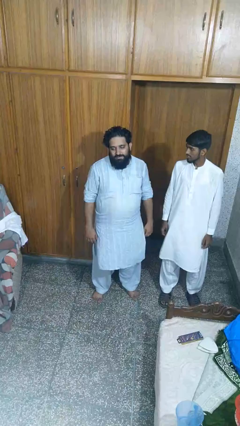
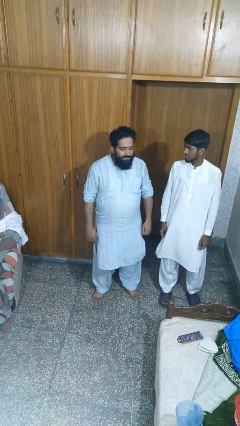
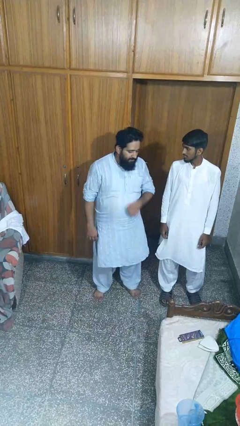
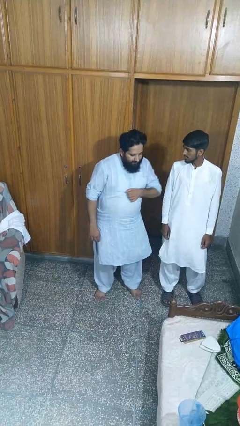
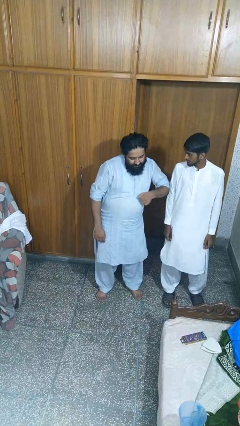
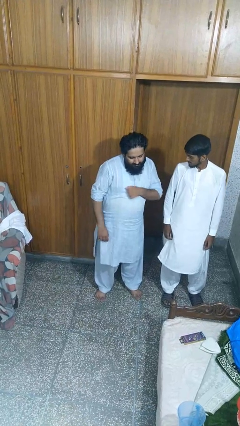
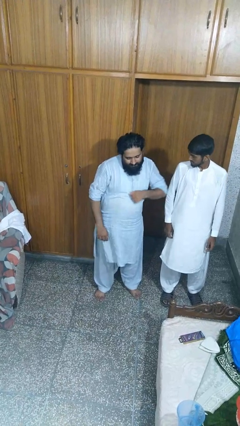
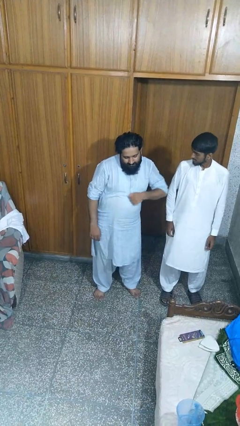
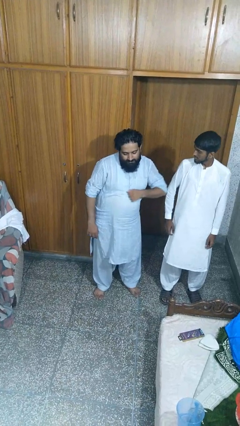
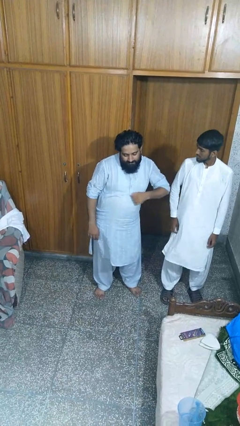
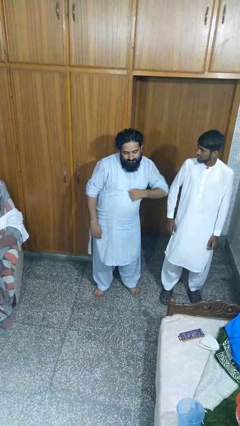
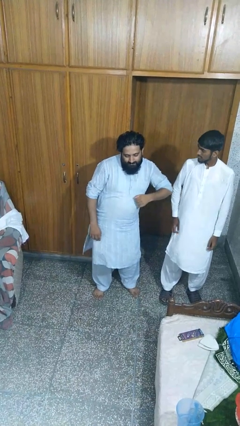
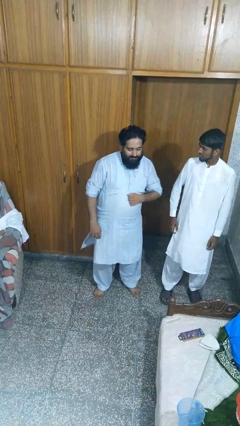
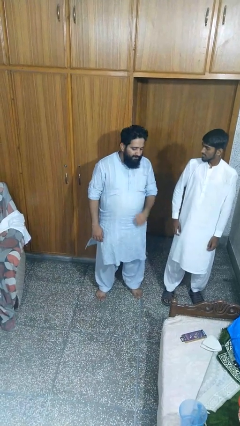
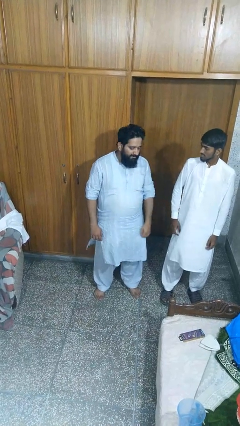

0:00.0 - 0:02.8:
person nudges person with elbow

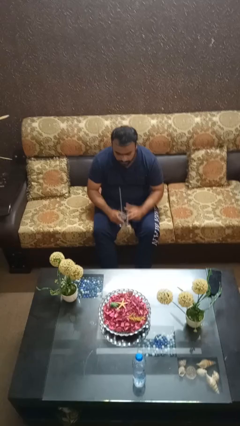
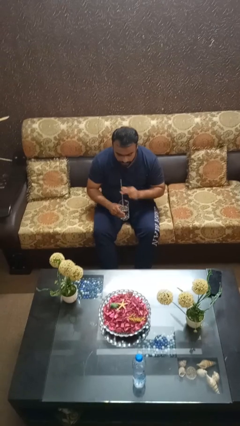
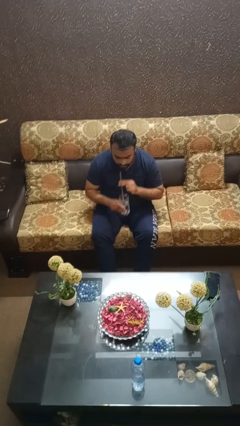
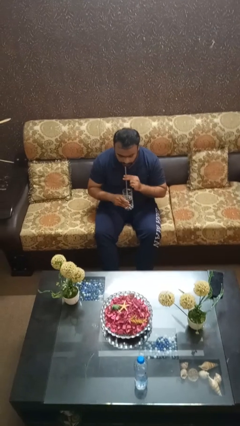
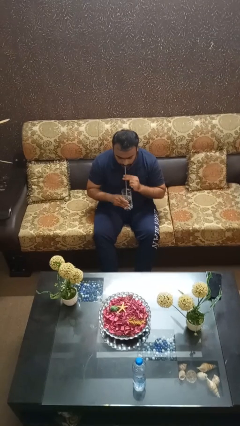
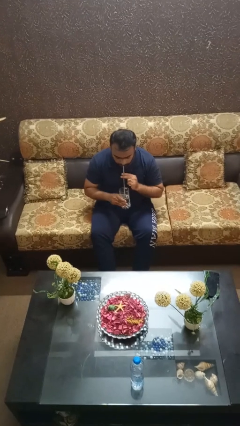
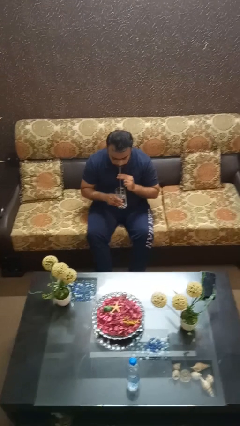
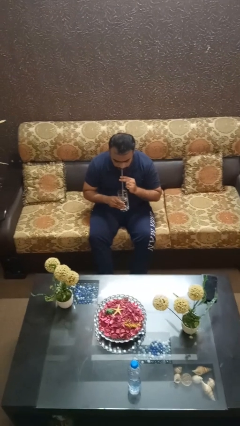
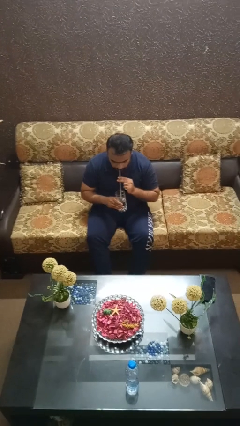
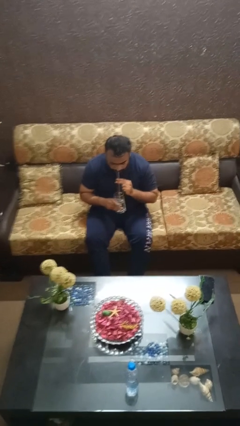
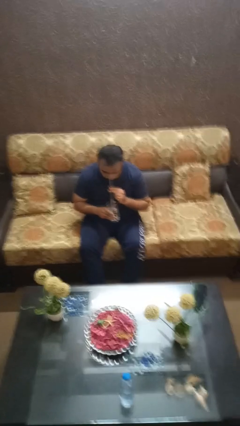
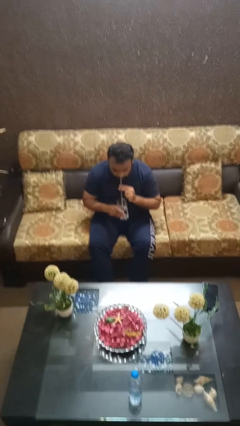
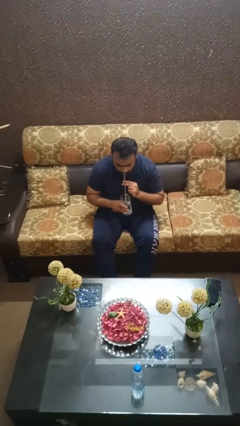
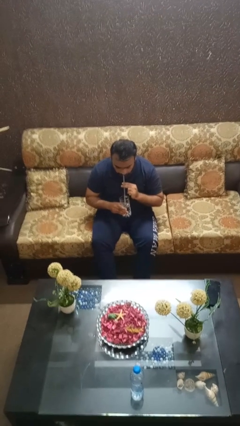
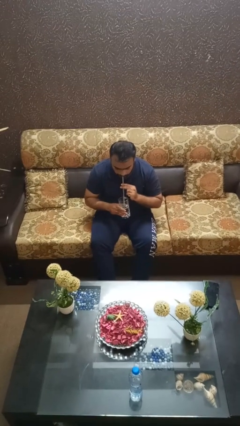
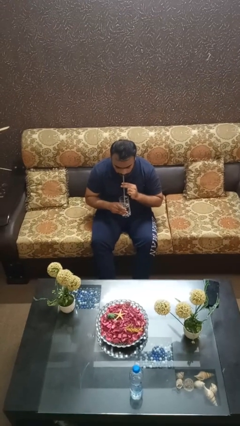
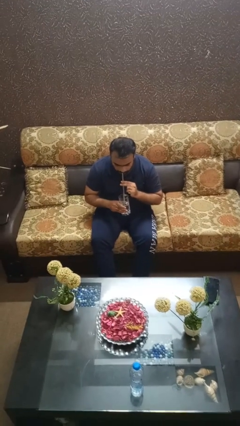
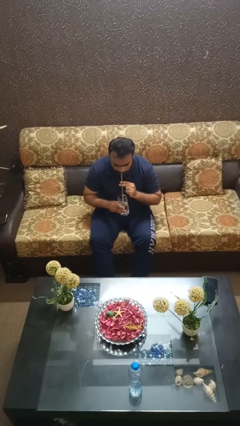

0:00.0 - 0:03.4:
person drinks from straw

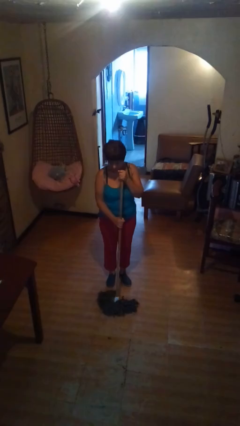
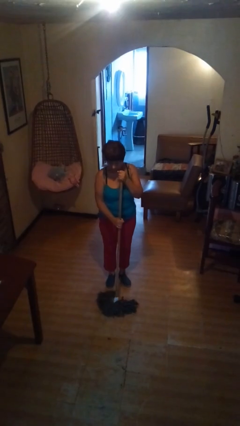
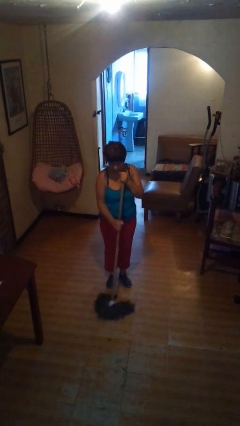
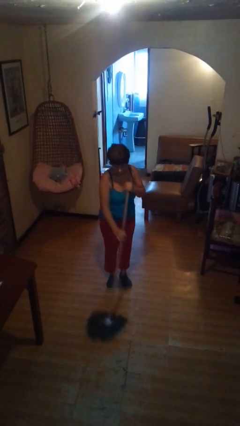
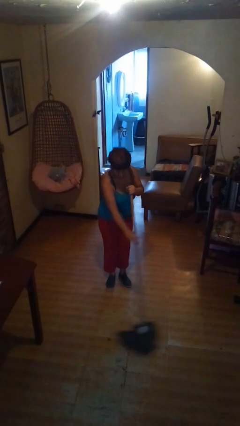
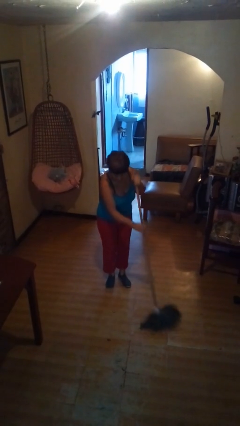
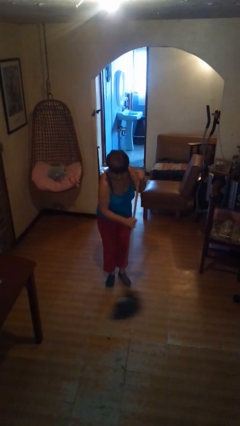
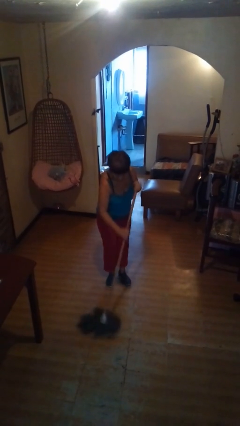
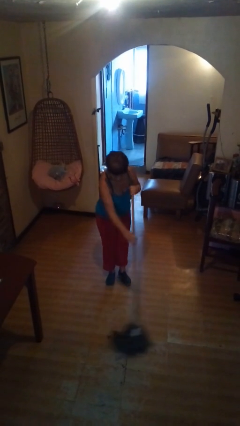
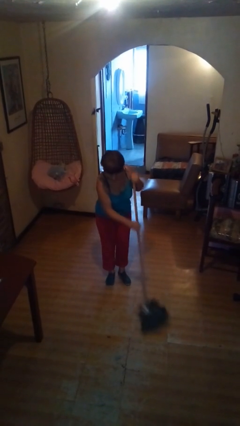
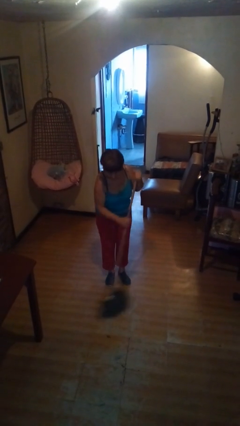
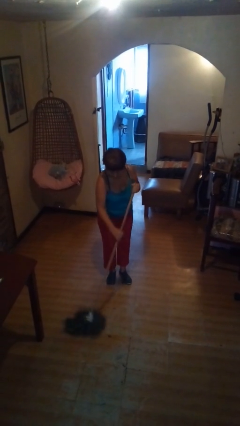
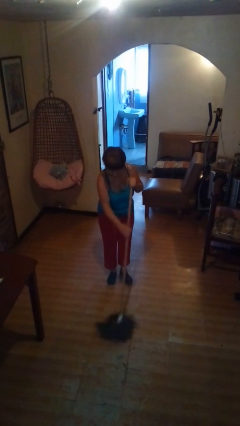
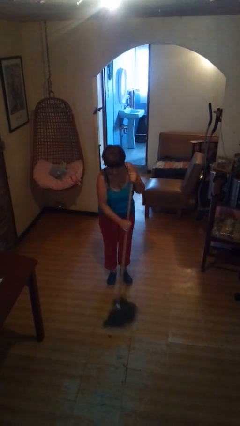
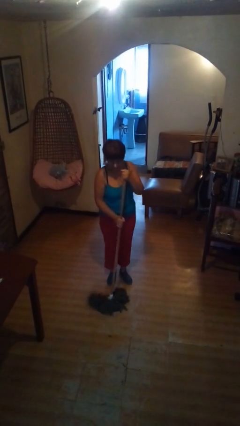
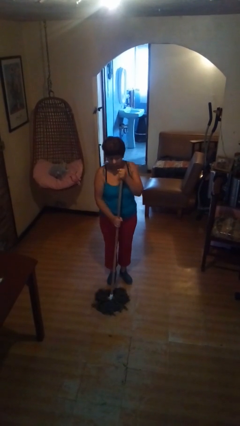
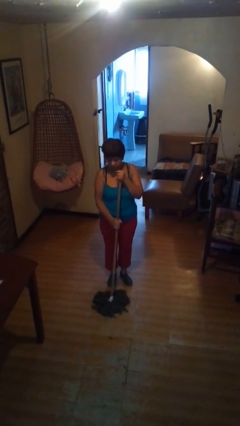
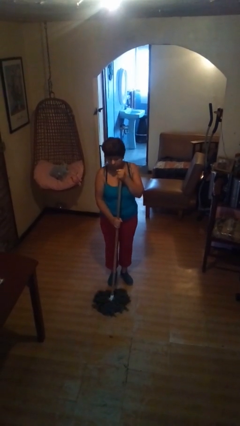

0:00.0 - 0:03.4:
person mops

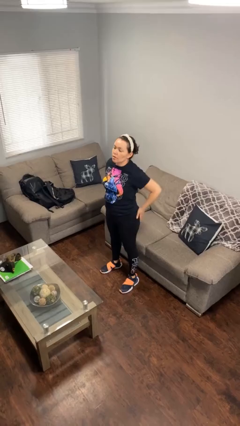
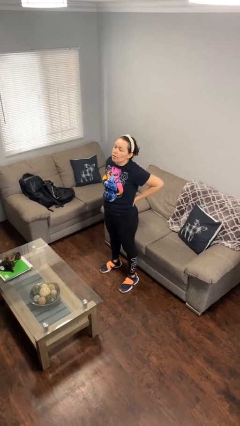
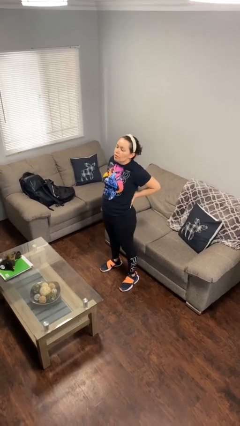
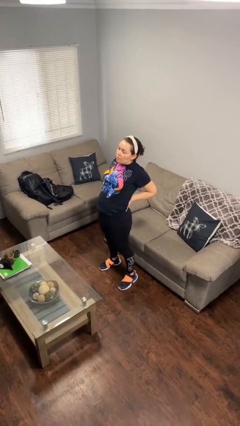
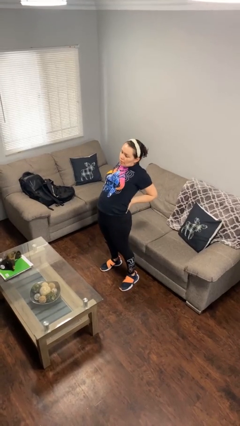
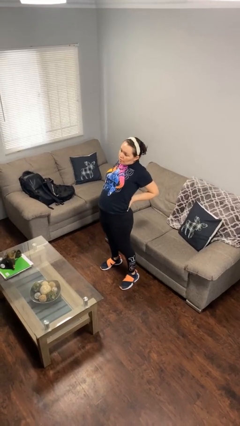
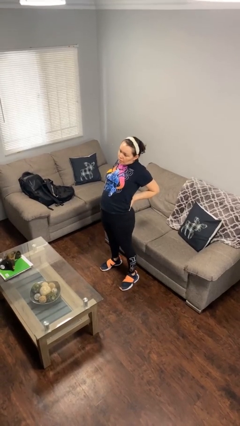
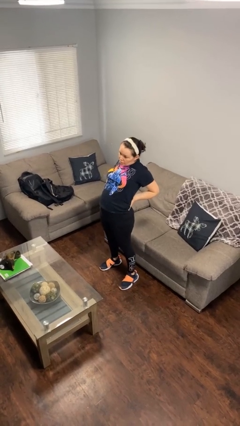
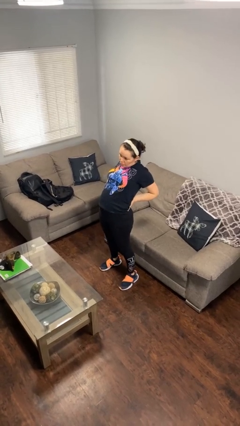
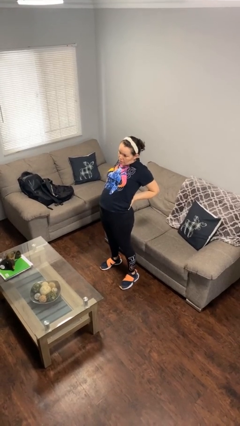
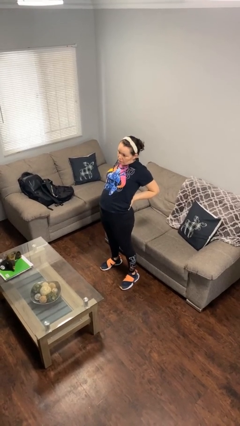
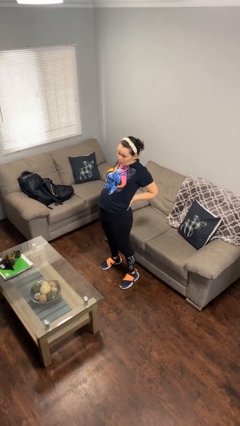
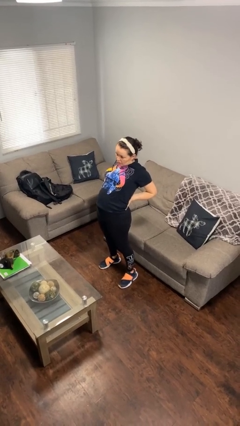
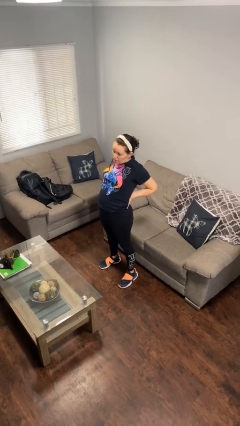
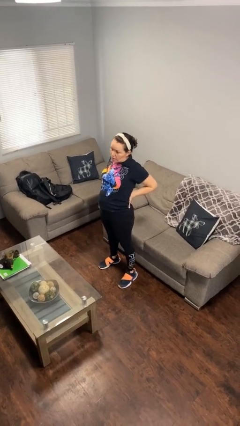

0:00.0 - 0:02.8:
person stretches back

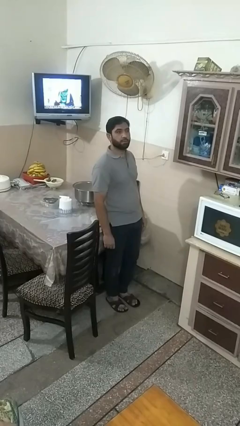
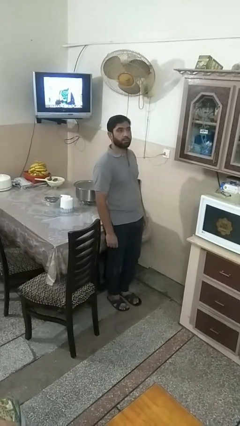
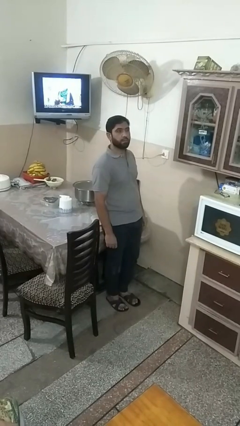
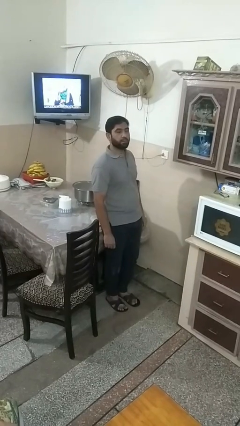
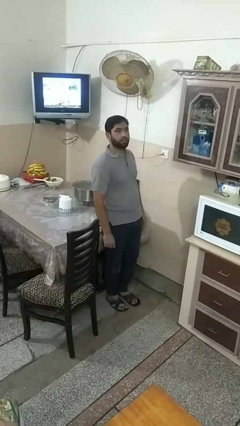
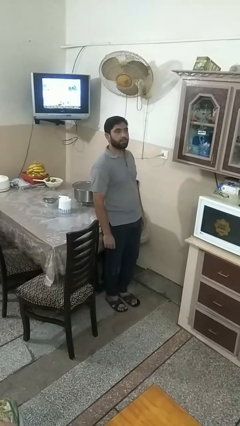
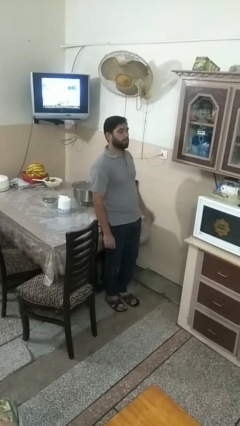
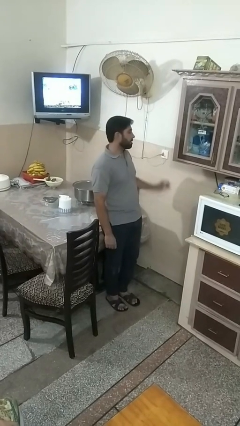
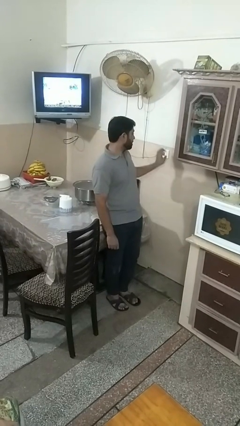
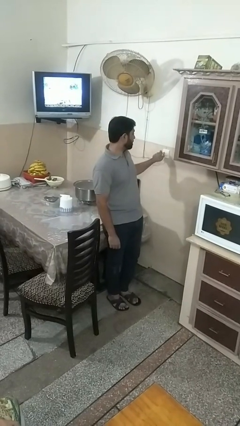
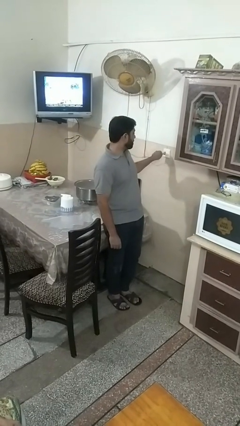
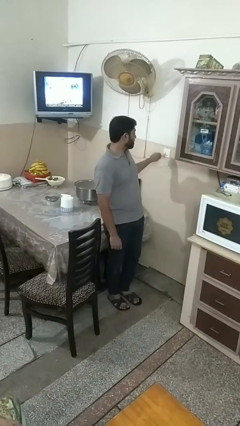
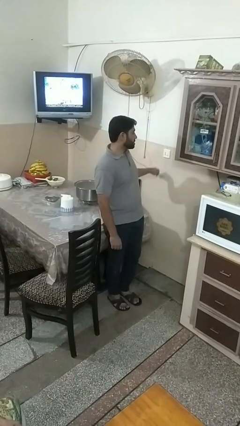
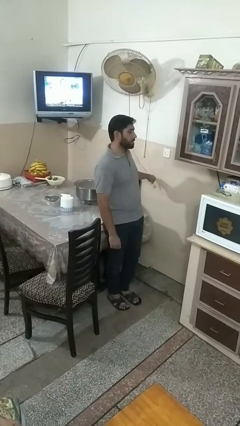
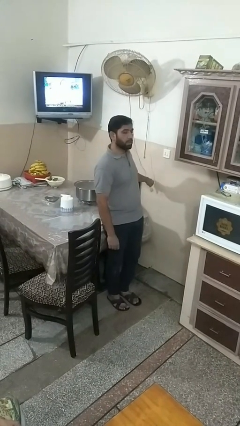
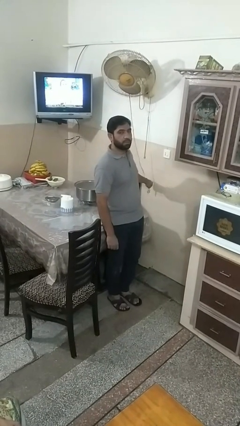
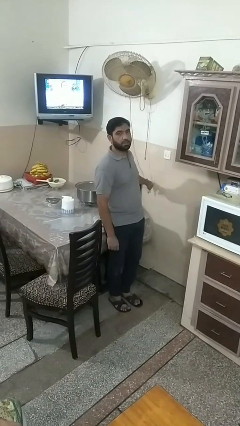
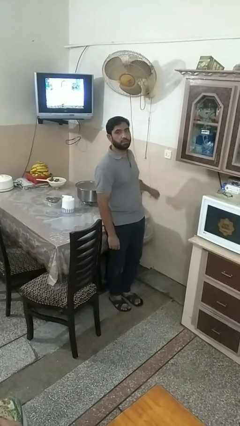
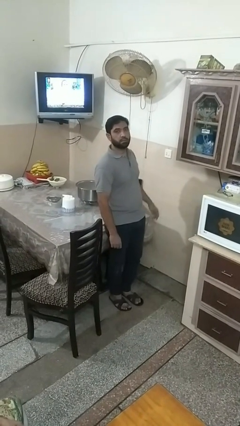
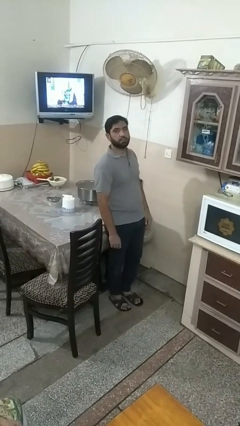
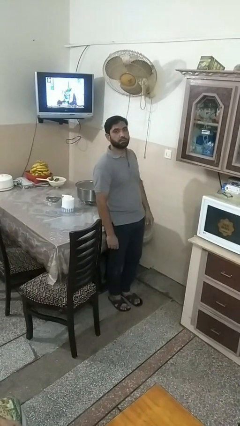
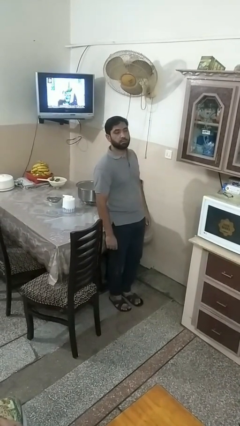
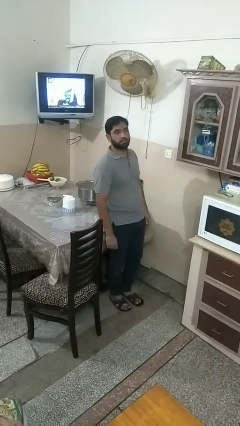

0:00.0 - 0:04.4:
person unplugs from electrical socket

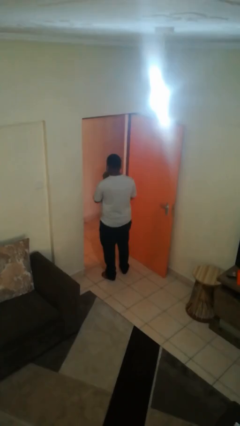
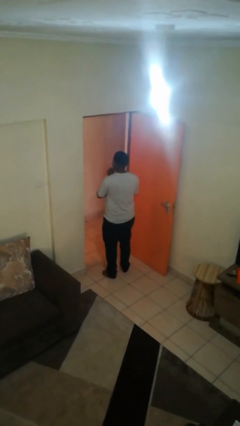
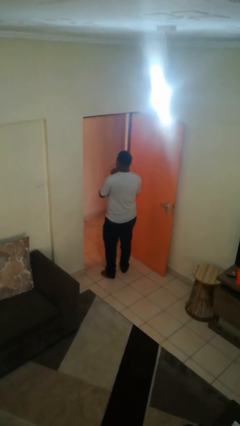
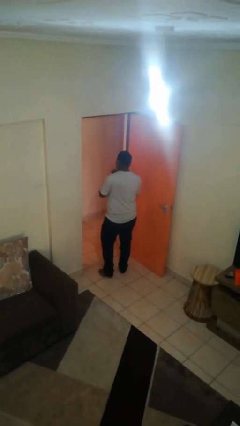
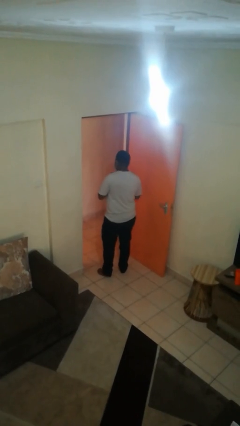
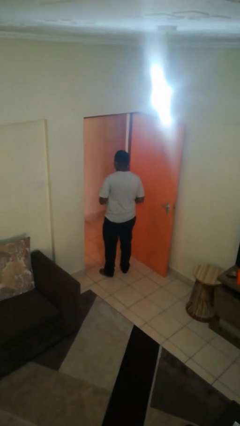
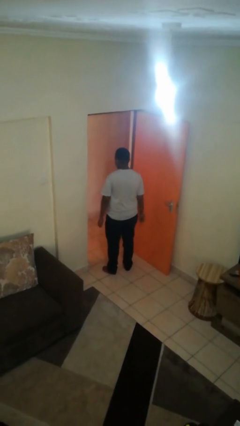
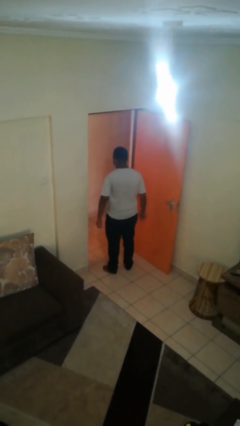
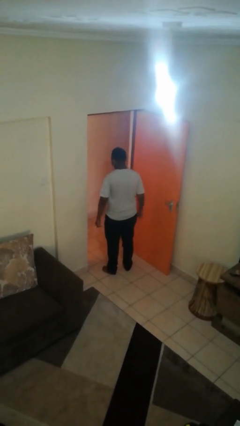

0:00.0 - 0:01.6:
person puts on facemask
